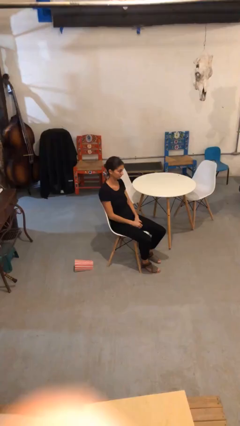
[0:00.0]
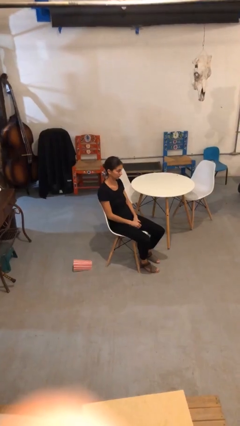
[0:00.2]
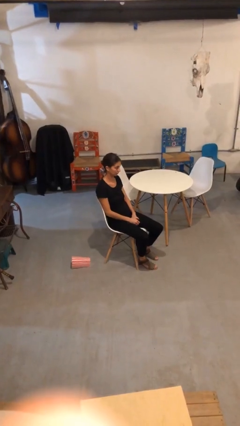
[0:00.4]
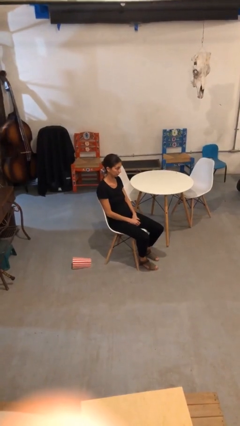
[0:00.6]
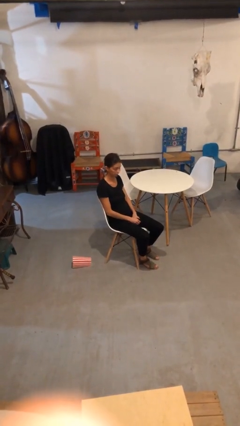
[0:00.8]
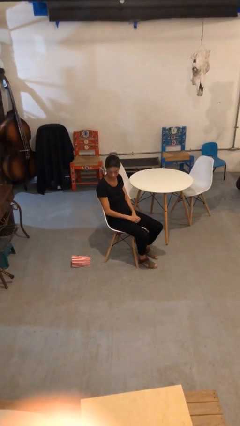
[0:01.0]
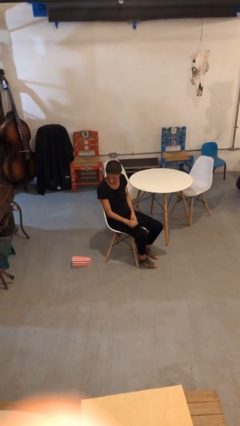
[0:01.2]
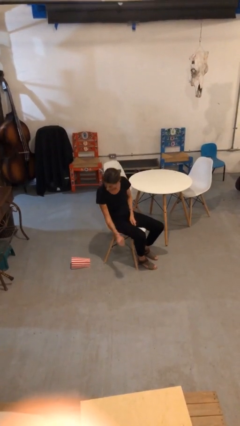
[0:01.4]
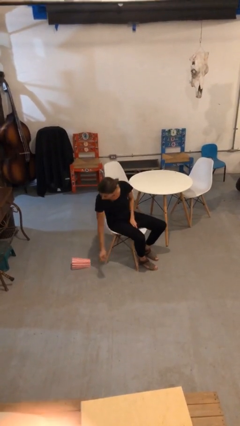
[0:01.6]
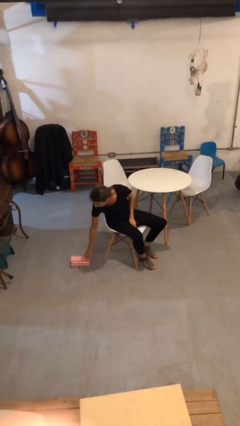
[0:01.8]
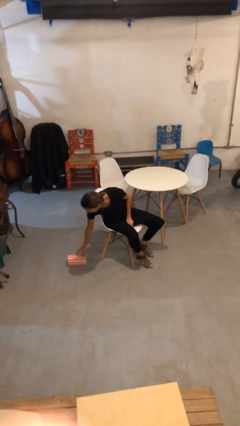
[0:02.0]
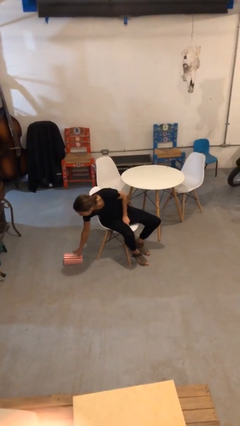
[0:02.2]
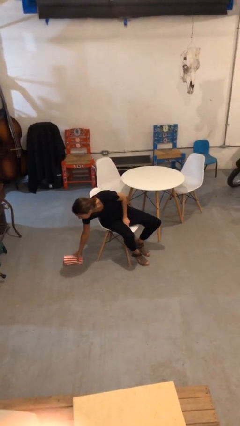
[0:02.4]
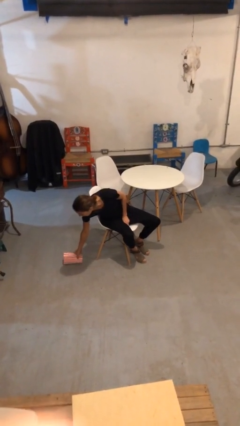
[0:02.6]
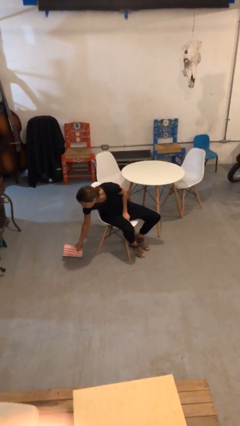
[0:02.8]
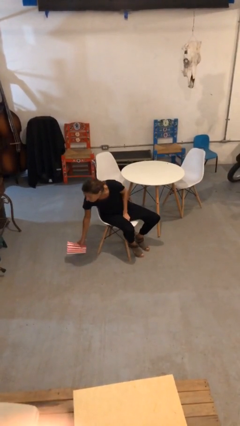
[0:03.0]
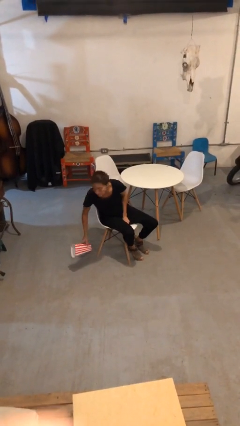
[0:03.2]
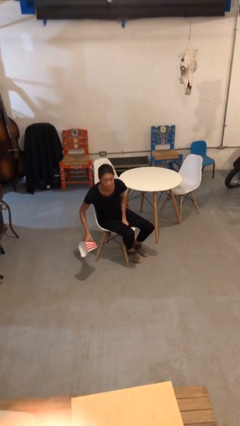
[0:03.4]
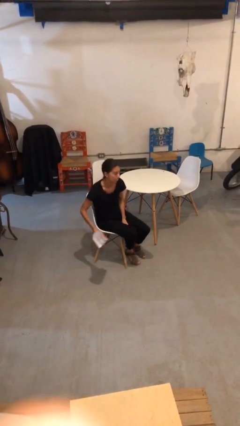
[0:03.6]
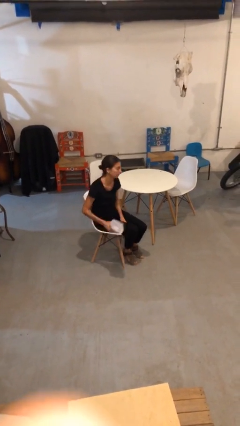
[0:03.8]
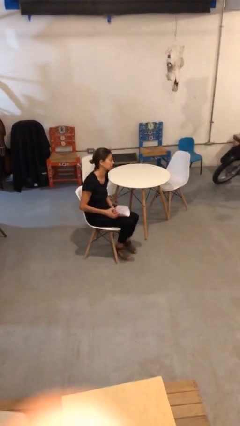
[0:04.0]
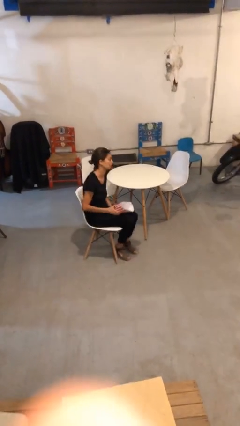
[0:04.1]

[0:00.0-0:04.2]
person picks up object from floor

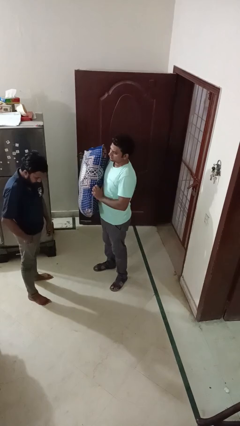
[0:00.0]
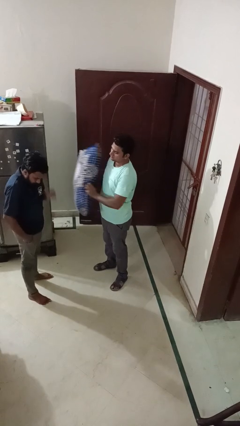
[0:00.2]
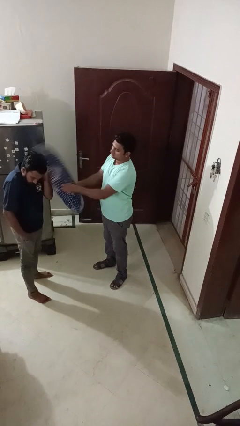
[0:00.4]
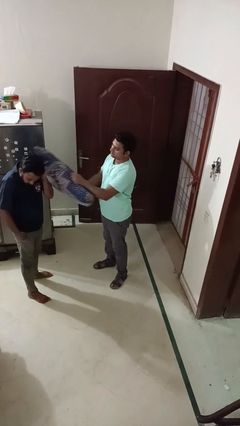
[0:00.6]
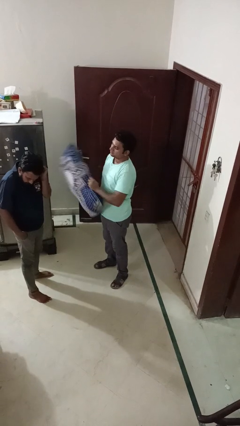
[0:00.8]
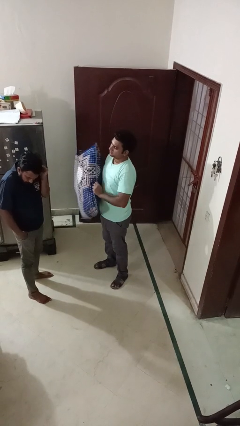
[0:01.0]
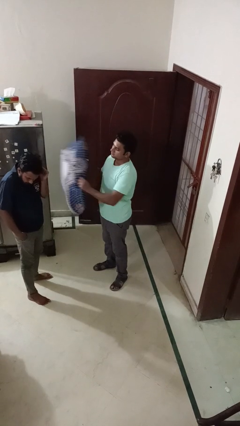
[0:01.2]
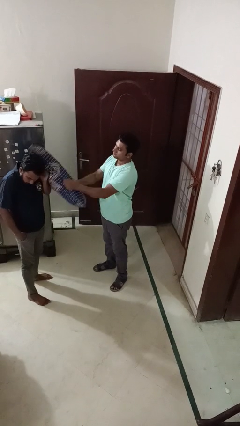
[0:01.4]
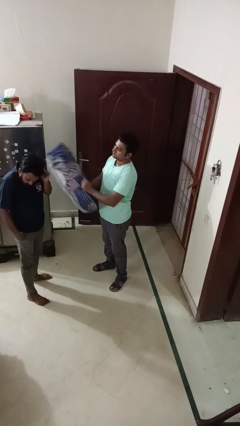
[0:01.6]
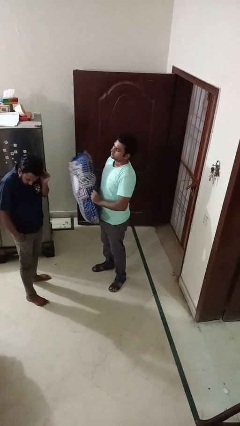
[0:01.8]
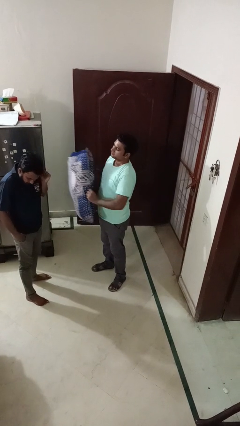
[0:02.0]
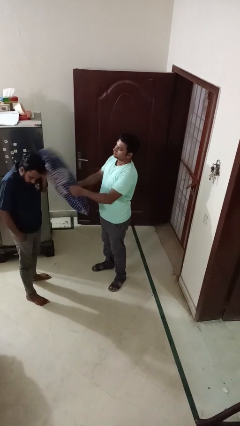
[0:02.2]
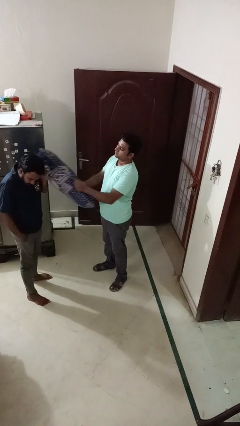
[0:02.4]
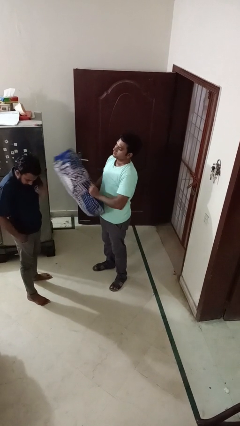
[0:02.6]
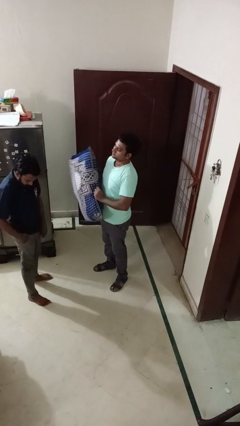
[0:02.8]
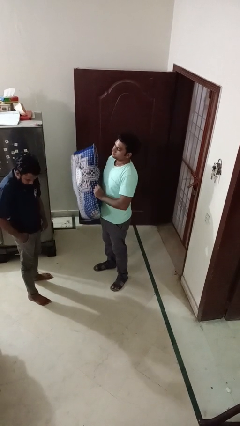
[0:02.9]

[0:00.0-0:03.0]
person hits person with pillow

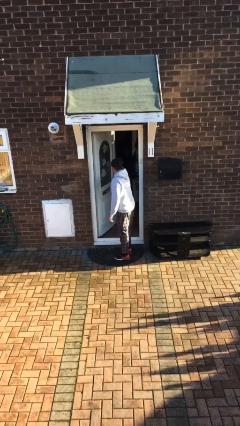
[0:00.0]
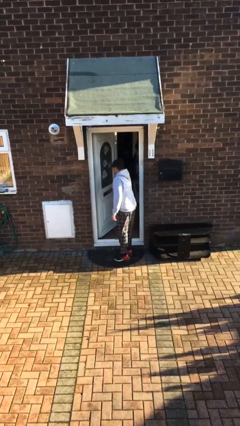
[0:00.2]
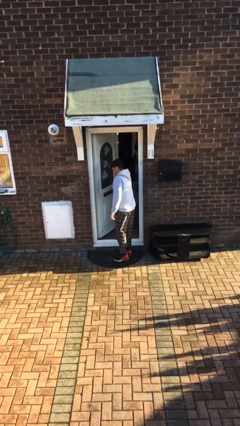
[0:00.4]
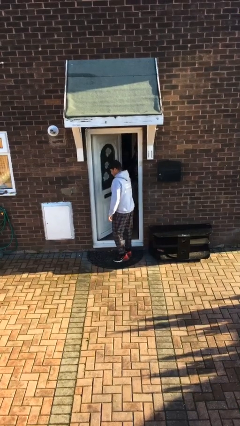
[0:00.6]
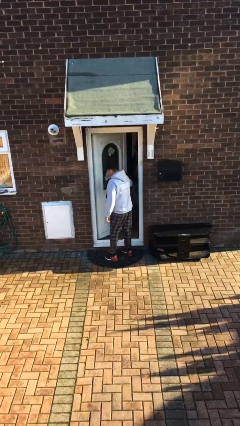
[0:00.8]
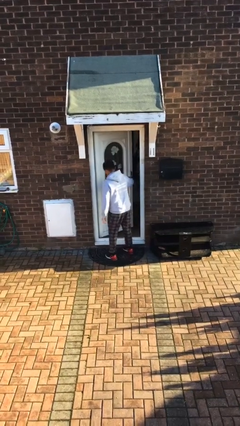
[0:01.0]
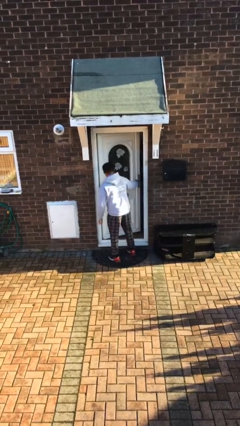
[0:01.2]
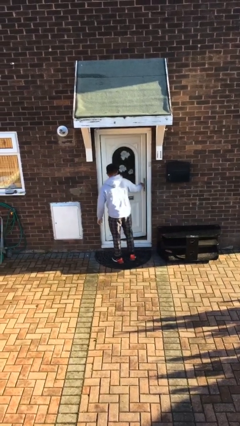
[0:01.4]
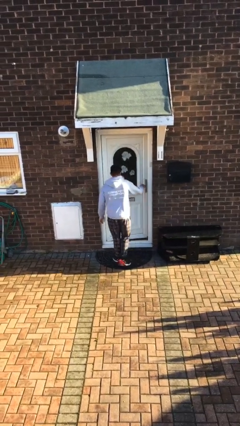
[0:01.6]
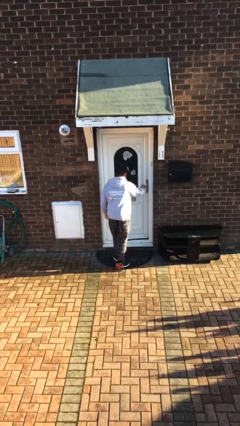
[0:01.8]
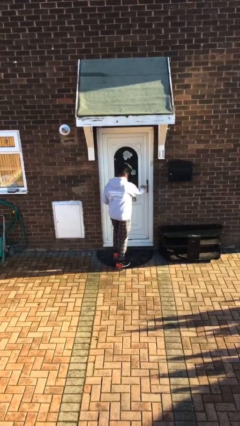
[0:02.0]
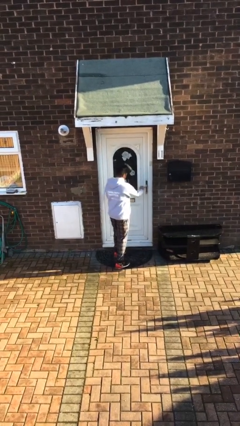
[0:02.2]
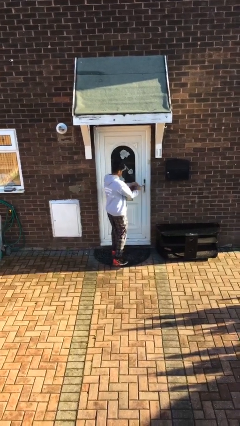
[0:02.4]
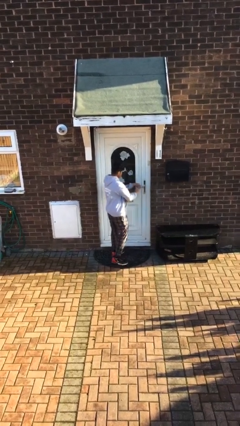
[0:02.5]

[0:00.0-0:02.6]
person closes facility door

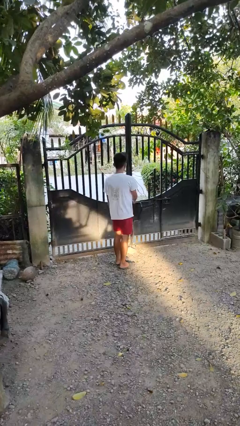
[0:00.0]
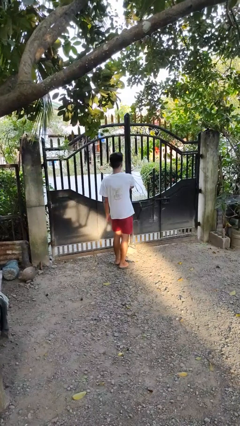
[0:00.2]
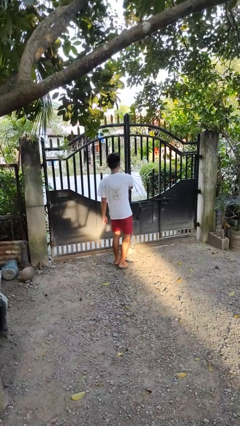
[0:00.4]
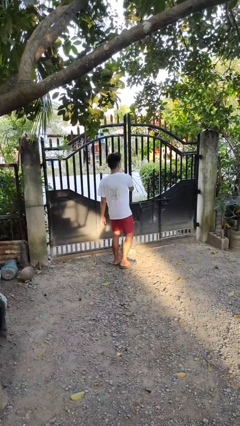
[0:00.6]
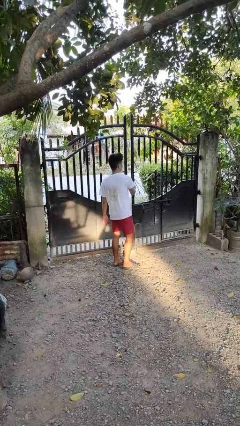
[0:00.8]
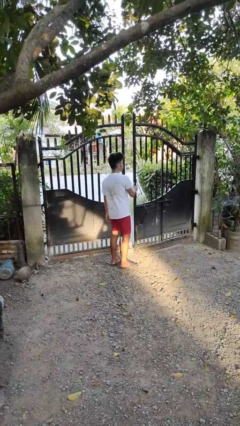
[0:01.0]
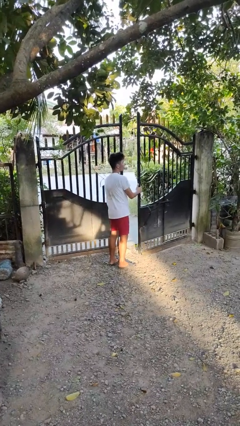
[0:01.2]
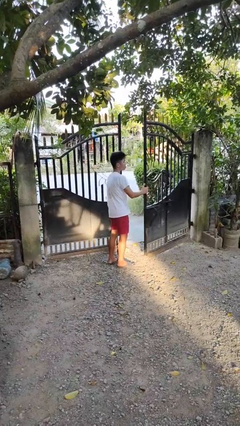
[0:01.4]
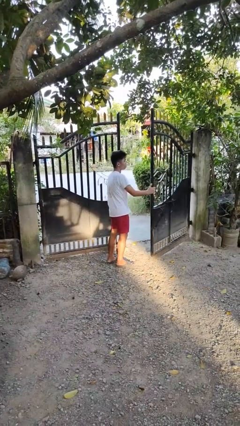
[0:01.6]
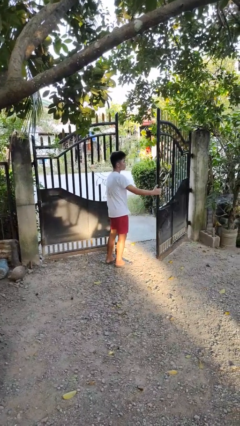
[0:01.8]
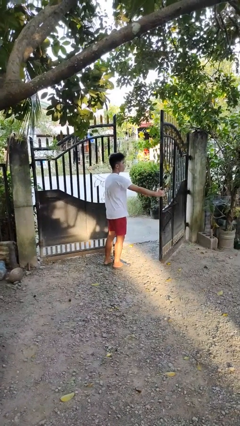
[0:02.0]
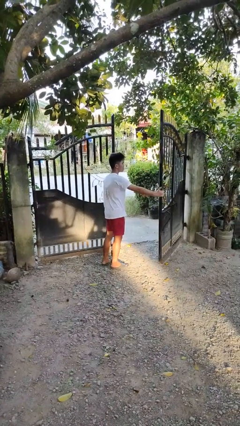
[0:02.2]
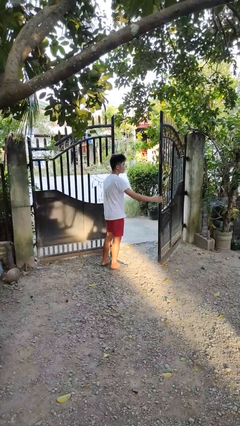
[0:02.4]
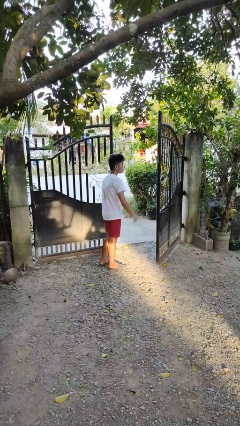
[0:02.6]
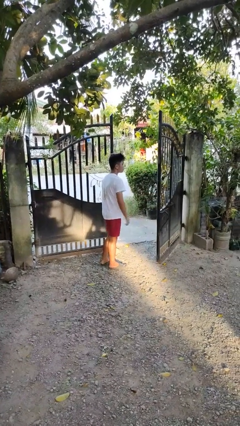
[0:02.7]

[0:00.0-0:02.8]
person opens gate

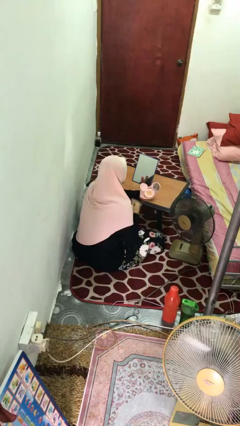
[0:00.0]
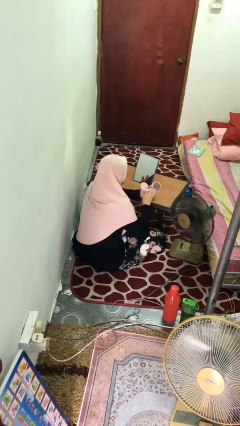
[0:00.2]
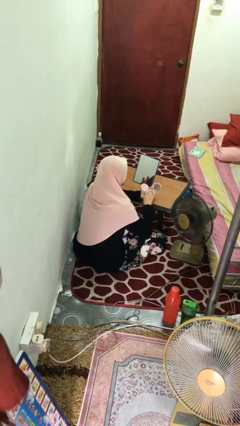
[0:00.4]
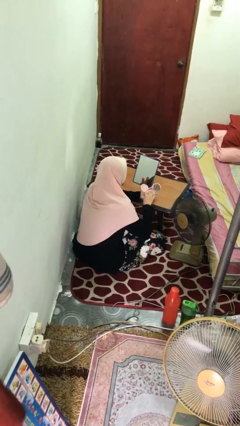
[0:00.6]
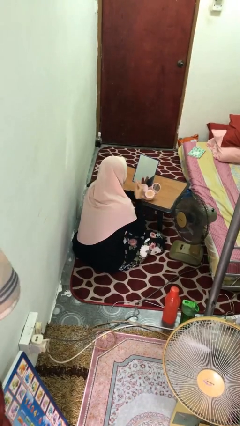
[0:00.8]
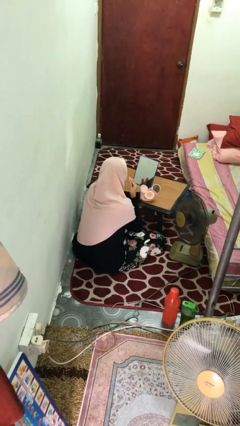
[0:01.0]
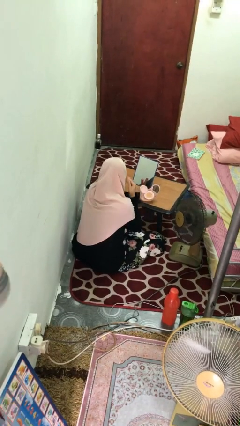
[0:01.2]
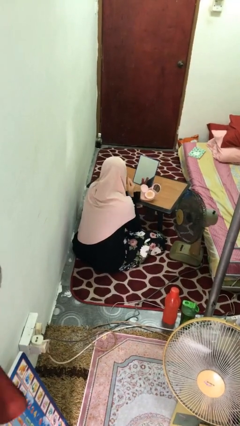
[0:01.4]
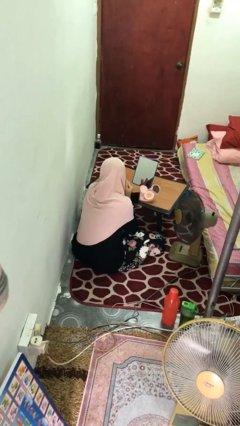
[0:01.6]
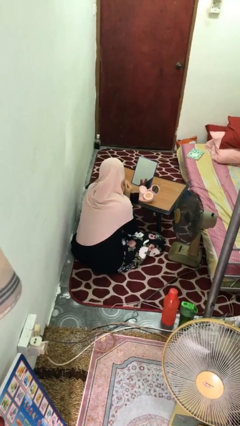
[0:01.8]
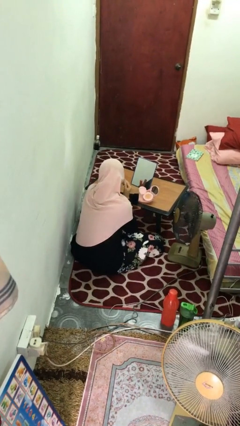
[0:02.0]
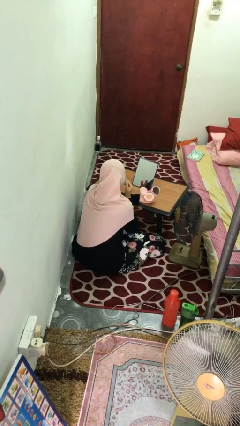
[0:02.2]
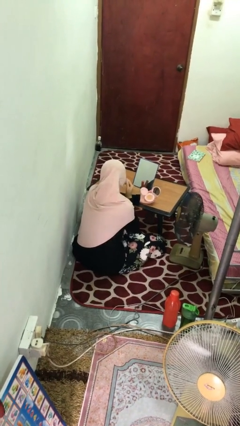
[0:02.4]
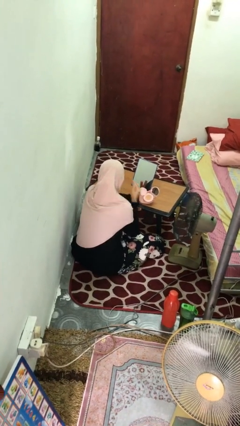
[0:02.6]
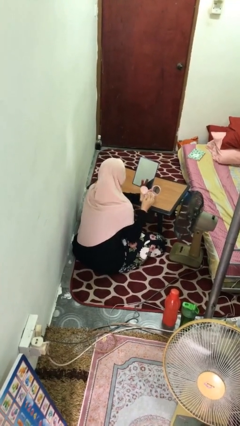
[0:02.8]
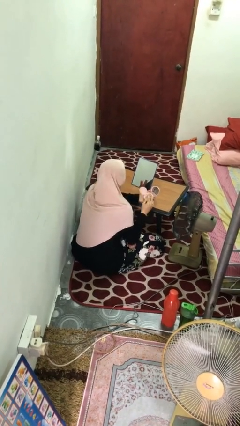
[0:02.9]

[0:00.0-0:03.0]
person applies foundation makeup

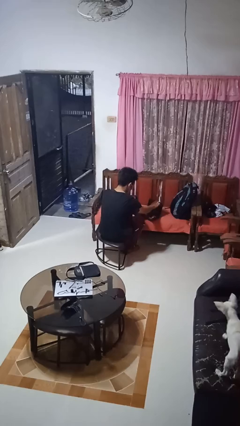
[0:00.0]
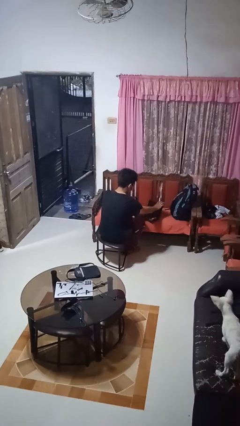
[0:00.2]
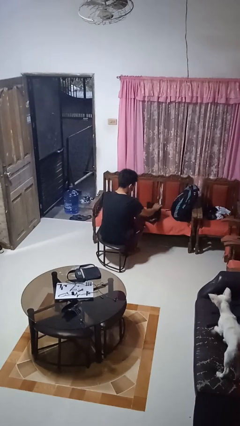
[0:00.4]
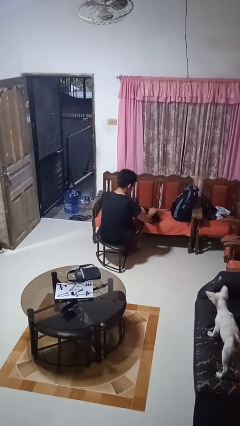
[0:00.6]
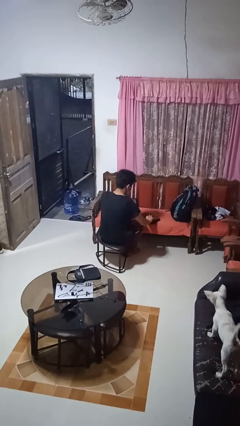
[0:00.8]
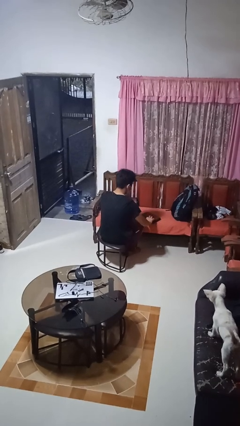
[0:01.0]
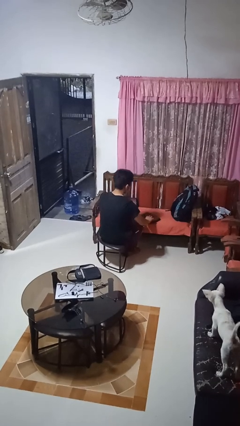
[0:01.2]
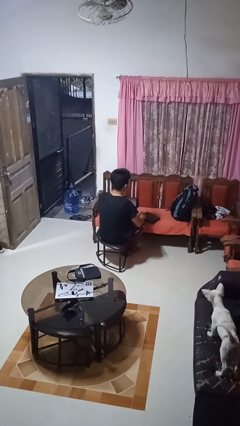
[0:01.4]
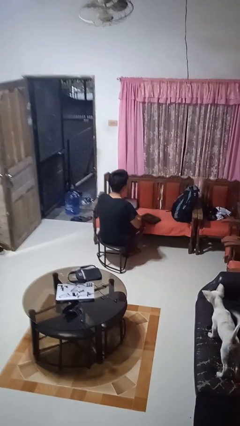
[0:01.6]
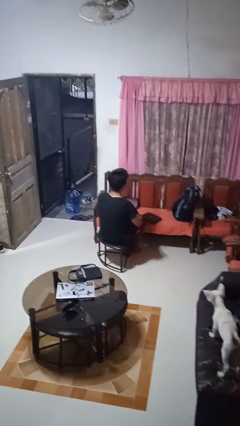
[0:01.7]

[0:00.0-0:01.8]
person closes laptop
